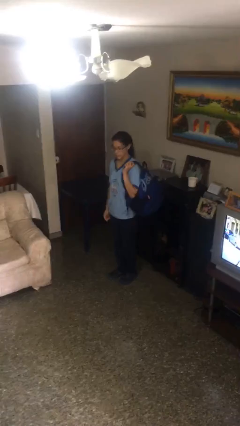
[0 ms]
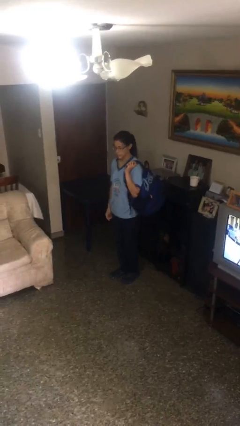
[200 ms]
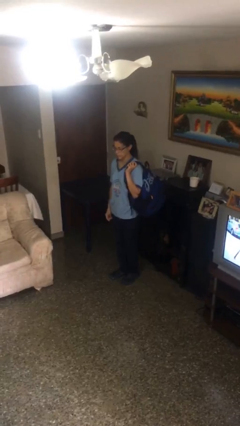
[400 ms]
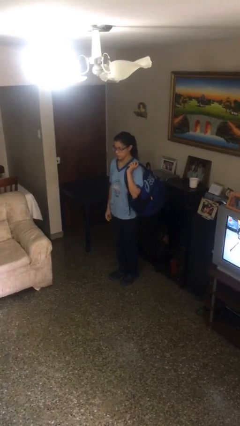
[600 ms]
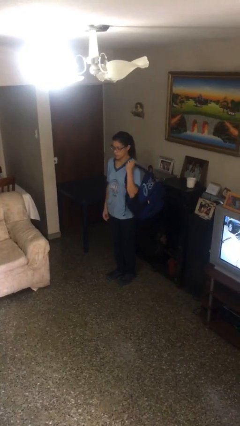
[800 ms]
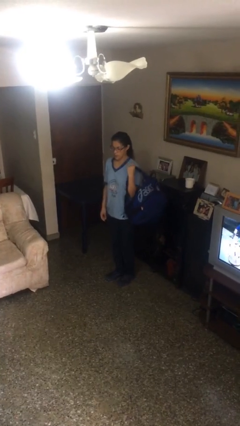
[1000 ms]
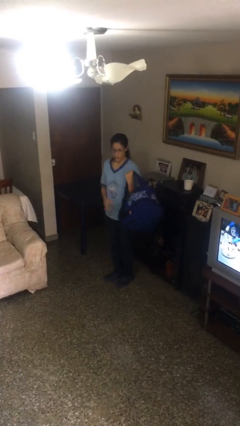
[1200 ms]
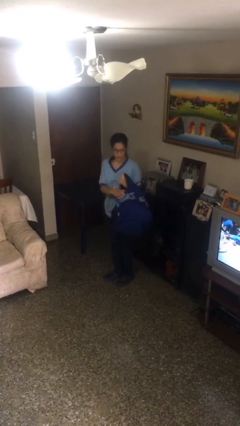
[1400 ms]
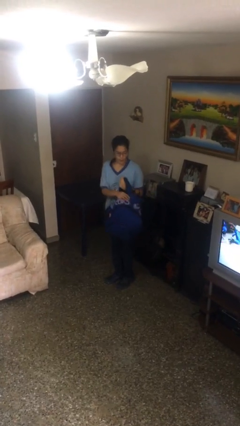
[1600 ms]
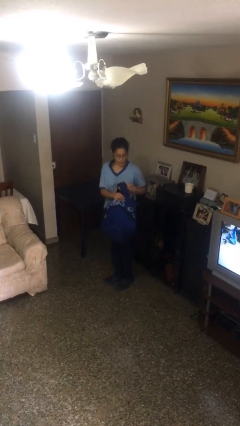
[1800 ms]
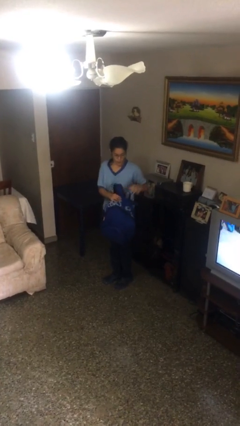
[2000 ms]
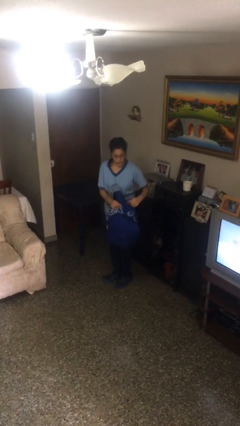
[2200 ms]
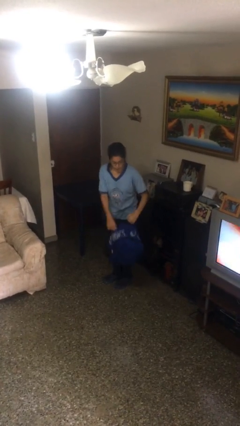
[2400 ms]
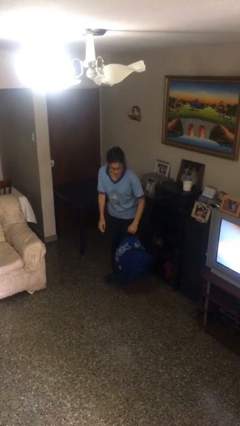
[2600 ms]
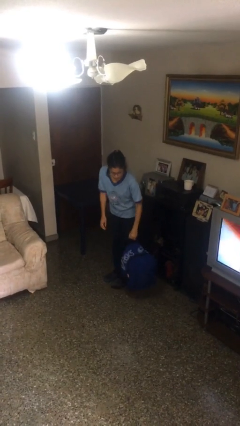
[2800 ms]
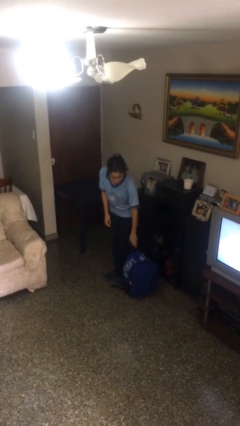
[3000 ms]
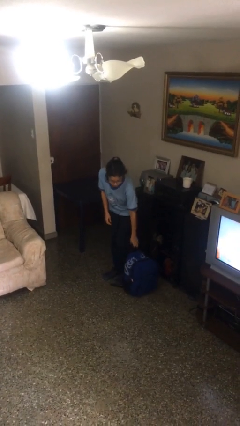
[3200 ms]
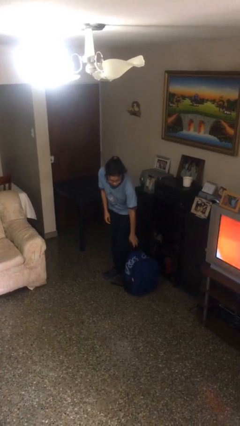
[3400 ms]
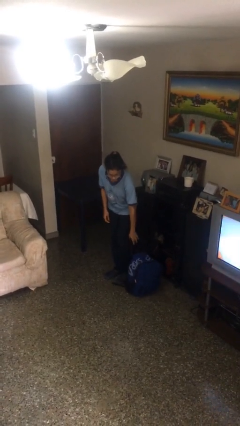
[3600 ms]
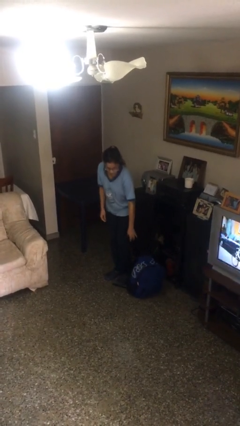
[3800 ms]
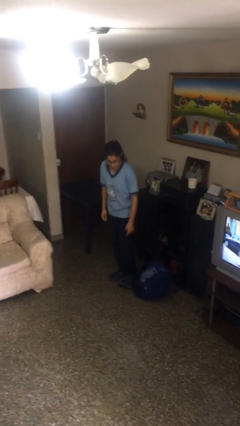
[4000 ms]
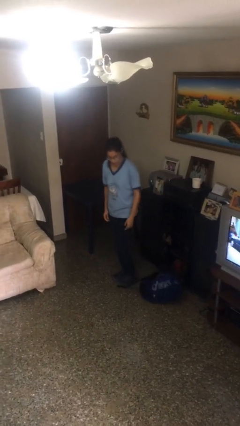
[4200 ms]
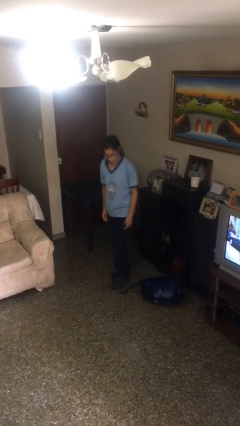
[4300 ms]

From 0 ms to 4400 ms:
person puts down object on floor

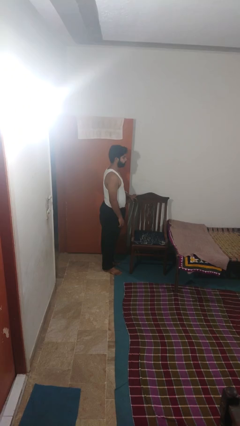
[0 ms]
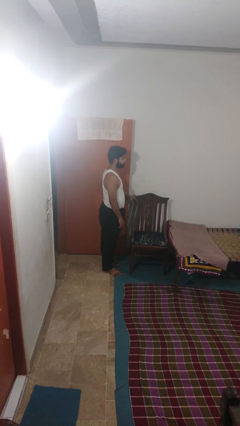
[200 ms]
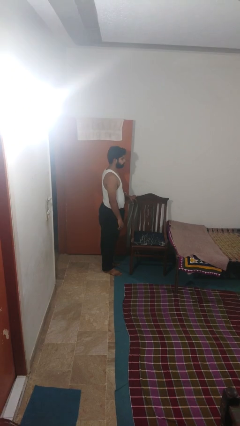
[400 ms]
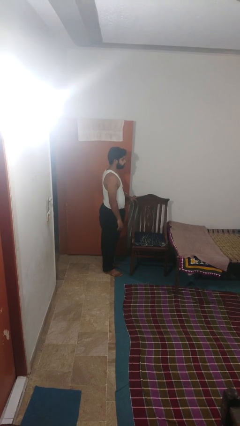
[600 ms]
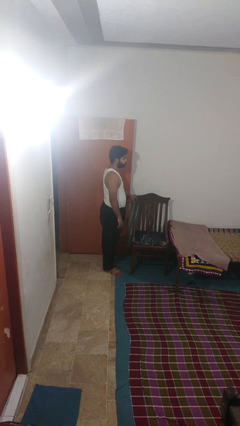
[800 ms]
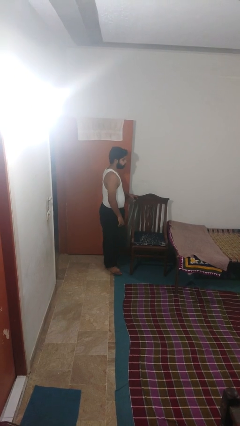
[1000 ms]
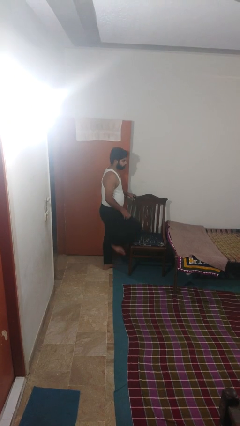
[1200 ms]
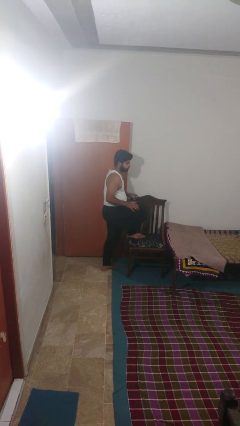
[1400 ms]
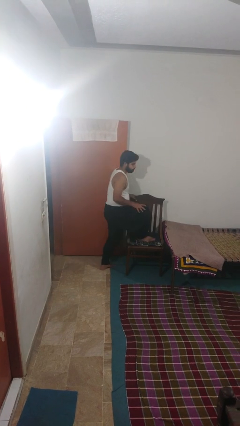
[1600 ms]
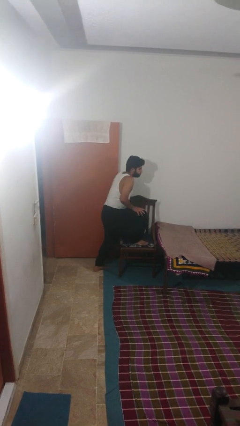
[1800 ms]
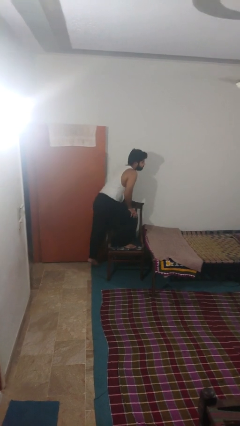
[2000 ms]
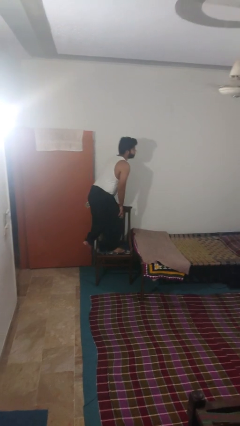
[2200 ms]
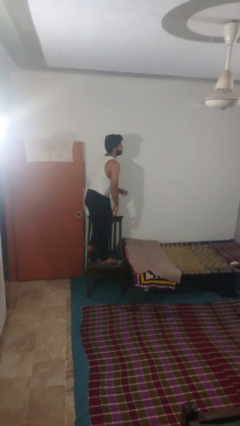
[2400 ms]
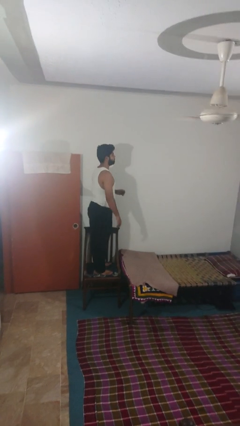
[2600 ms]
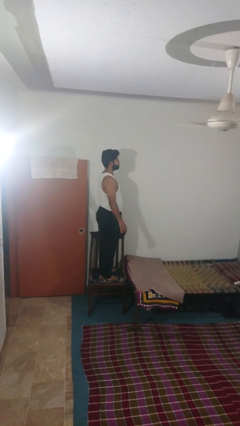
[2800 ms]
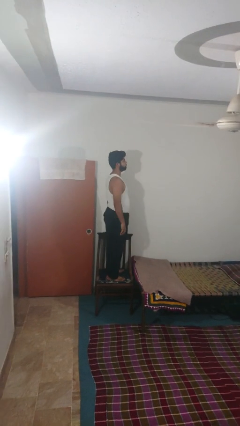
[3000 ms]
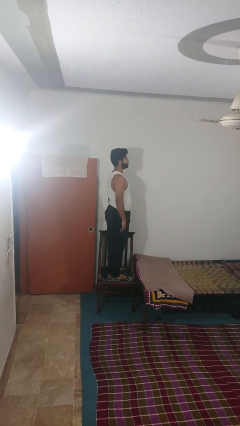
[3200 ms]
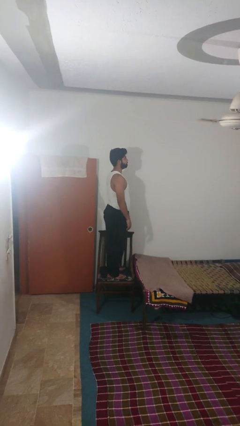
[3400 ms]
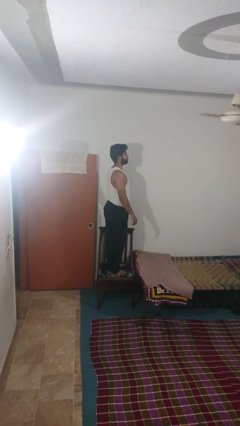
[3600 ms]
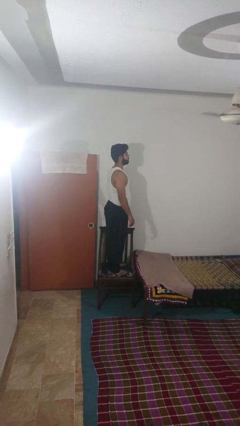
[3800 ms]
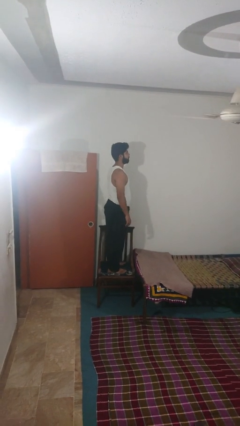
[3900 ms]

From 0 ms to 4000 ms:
person climbs on chair

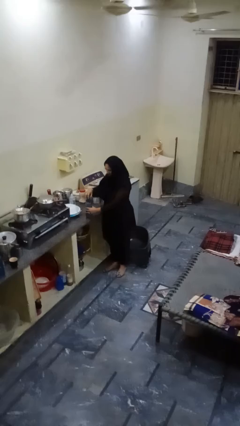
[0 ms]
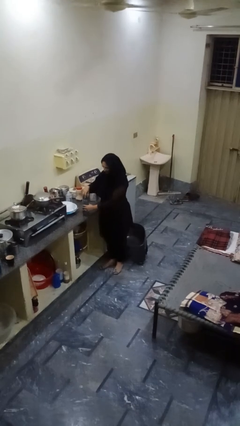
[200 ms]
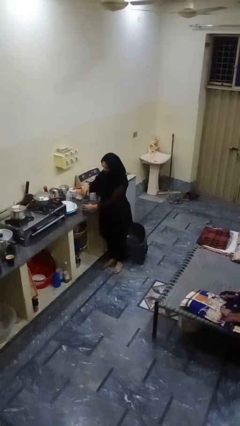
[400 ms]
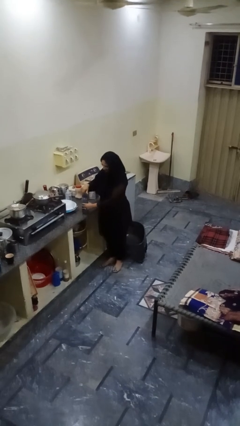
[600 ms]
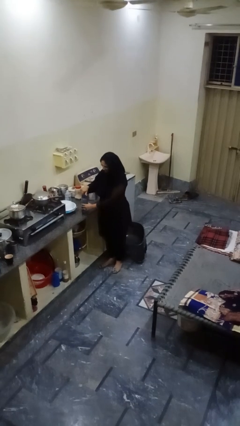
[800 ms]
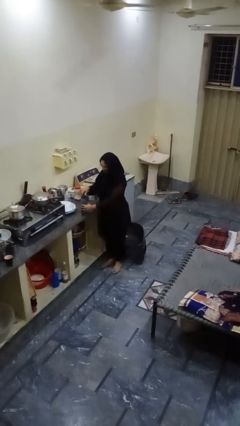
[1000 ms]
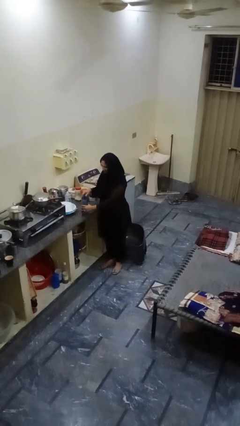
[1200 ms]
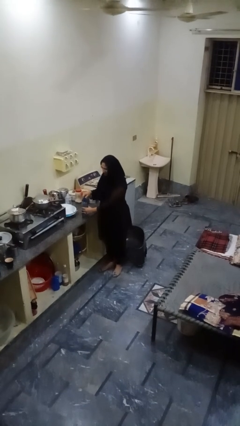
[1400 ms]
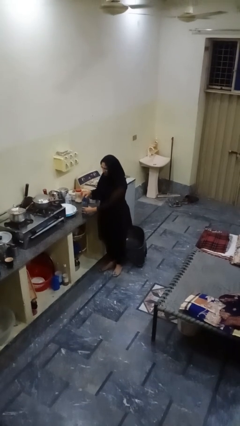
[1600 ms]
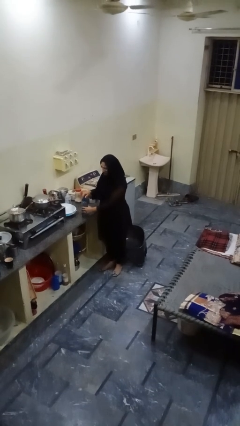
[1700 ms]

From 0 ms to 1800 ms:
person screws lid to bottle

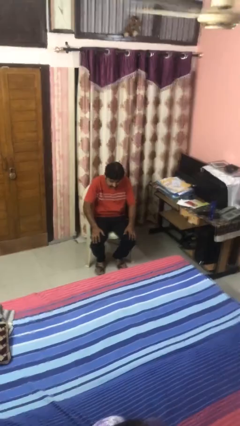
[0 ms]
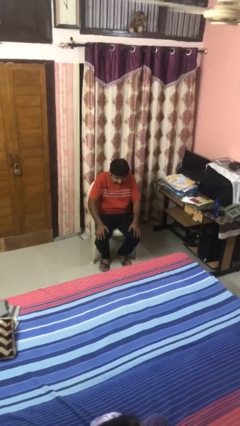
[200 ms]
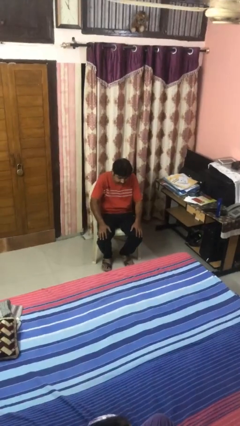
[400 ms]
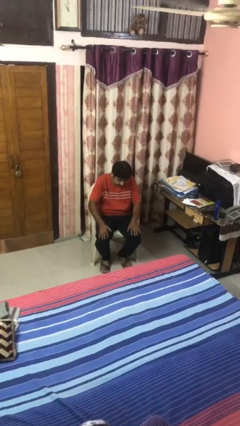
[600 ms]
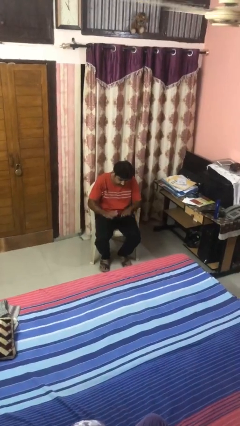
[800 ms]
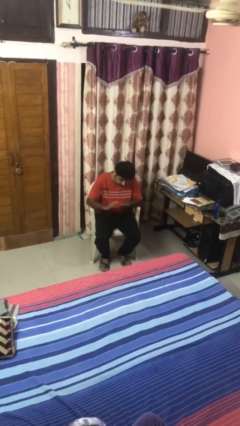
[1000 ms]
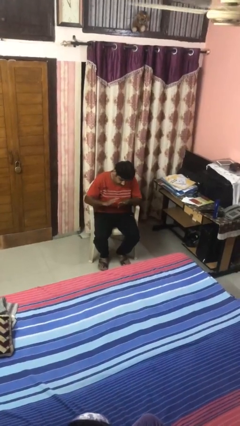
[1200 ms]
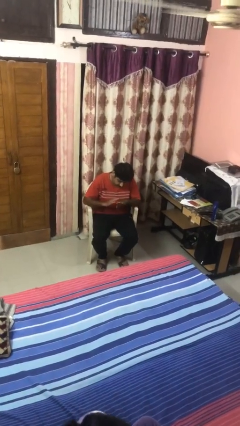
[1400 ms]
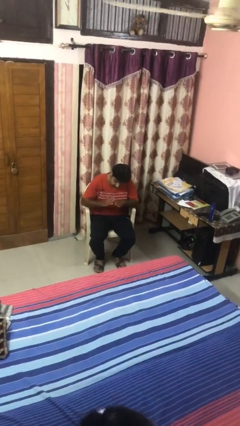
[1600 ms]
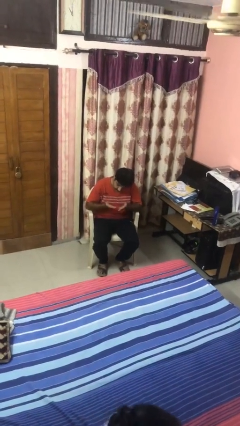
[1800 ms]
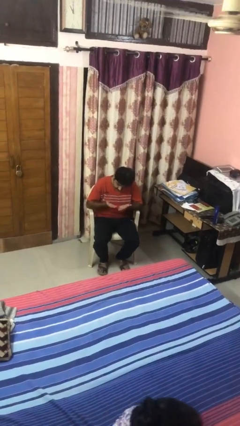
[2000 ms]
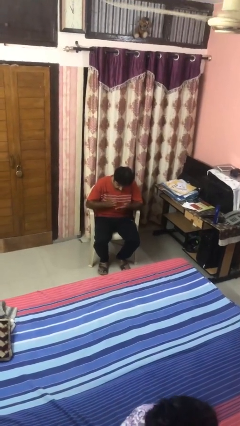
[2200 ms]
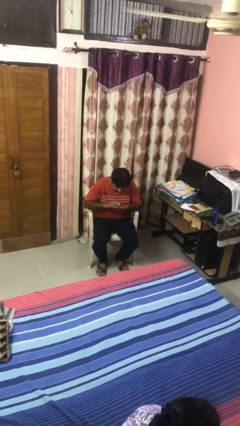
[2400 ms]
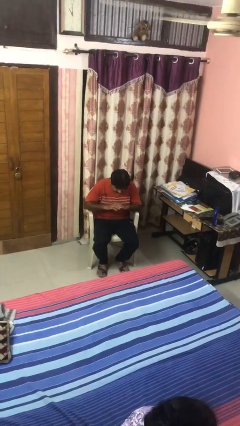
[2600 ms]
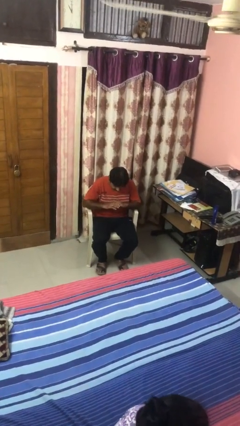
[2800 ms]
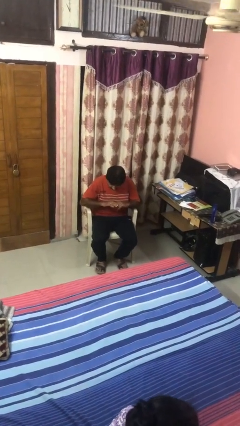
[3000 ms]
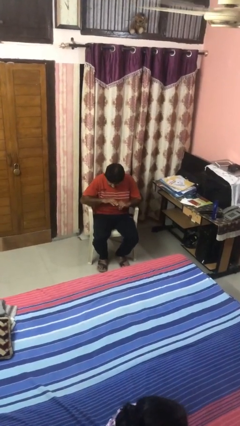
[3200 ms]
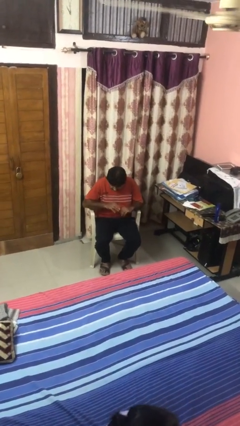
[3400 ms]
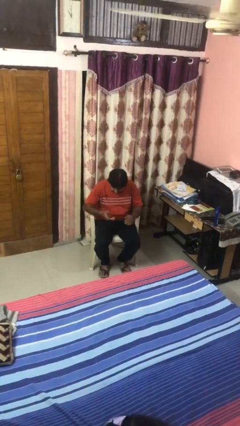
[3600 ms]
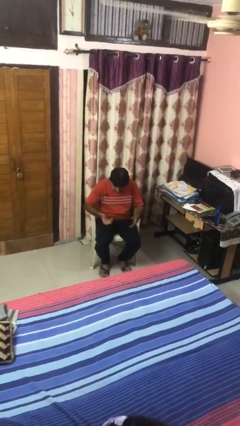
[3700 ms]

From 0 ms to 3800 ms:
person looks at hands in lap

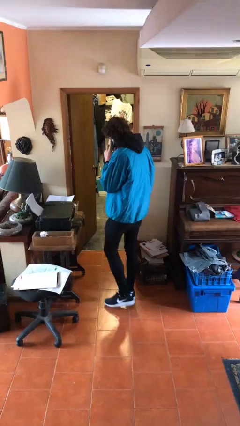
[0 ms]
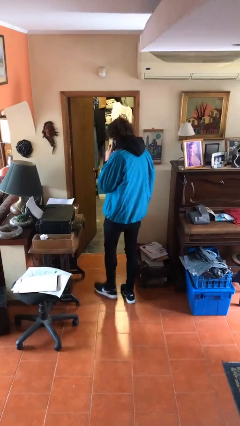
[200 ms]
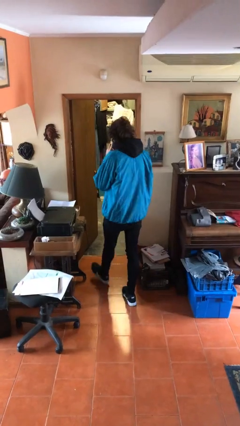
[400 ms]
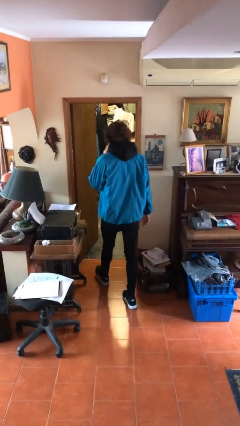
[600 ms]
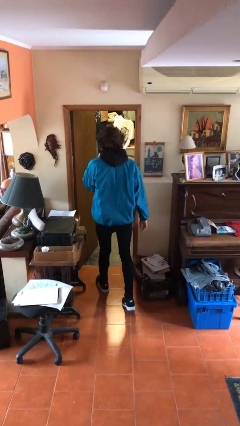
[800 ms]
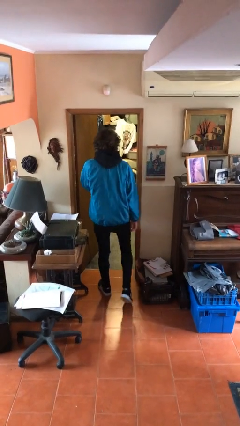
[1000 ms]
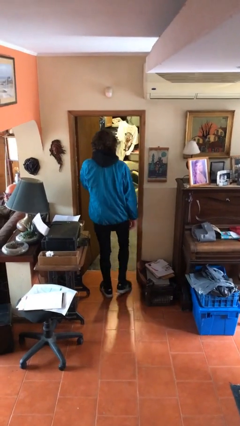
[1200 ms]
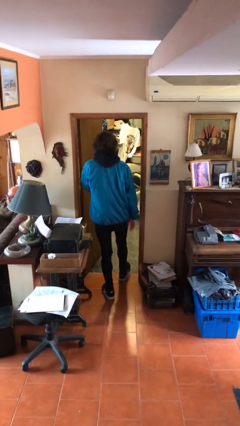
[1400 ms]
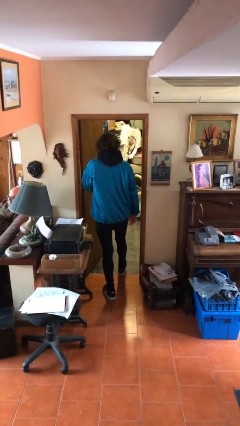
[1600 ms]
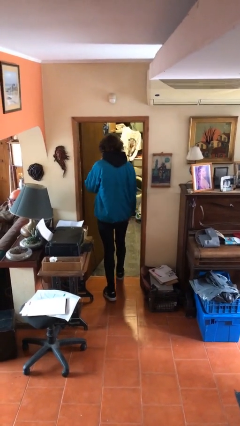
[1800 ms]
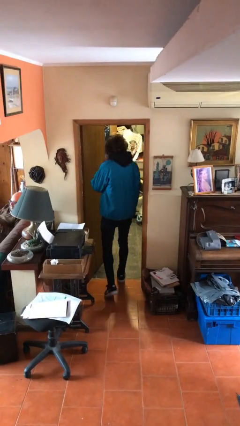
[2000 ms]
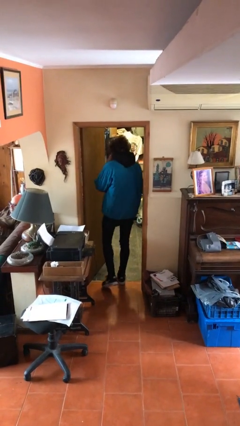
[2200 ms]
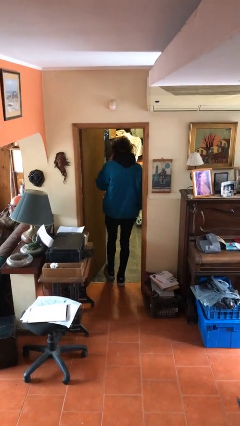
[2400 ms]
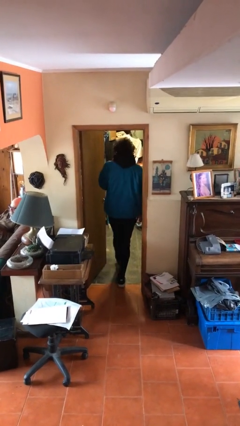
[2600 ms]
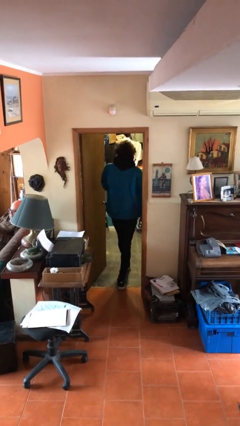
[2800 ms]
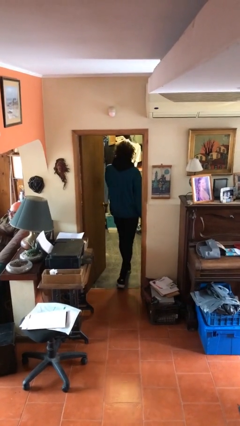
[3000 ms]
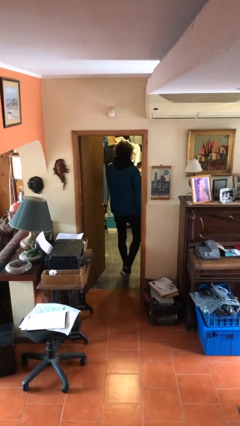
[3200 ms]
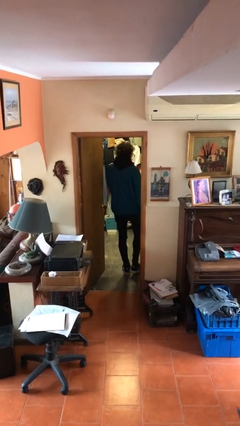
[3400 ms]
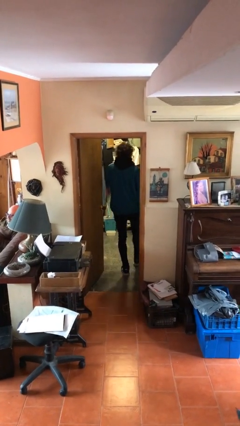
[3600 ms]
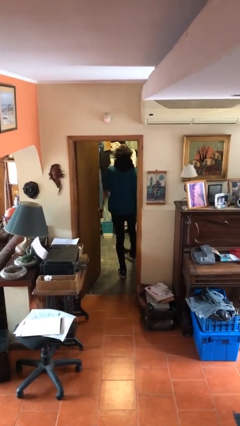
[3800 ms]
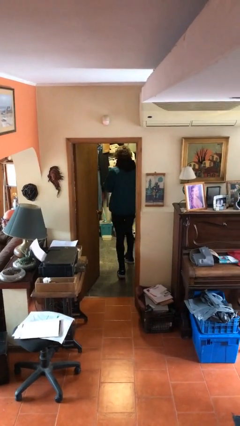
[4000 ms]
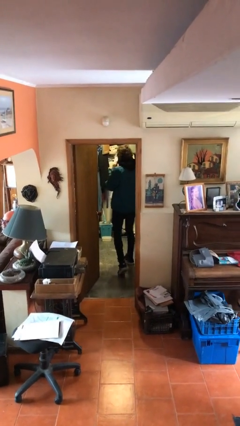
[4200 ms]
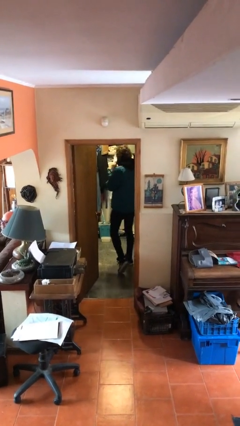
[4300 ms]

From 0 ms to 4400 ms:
person exits scene through structure
